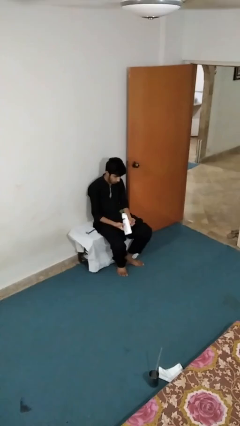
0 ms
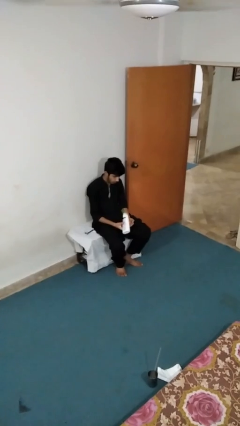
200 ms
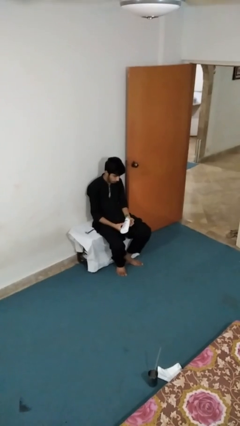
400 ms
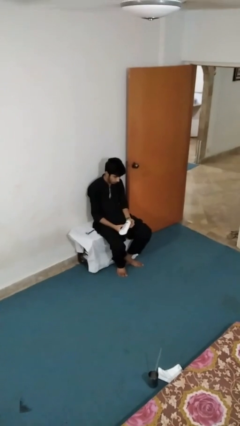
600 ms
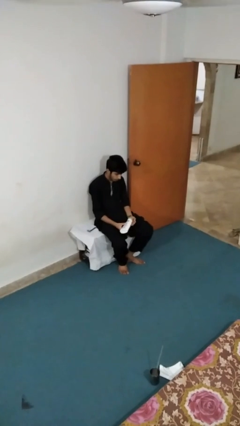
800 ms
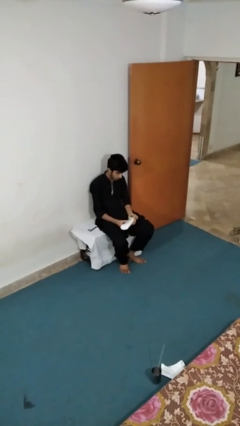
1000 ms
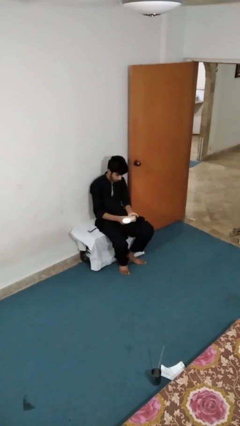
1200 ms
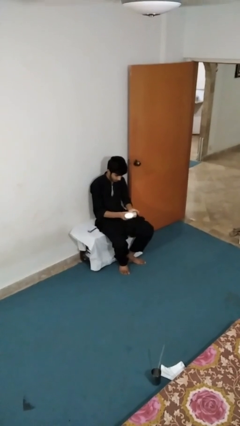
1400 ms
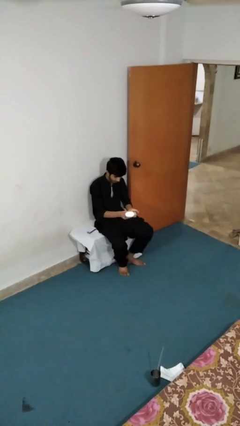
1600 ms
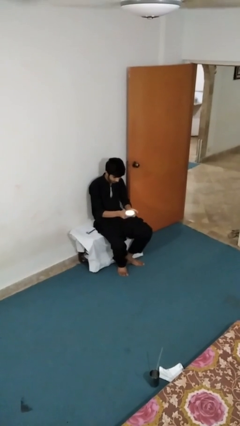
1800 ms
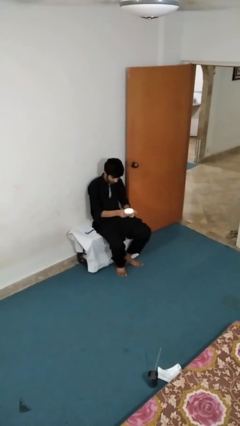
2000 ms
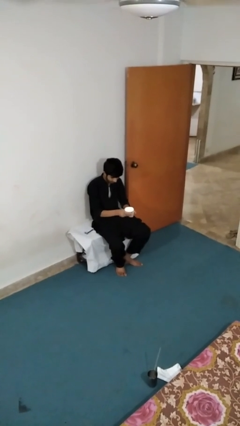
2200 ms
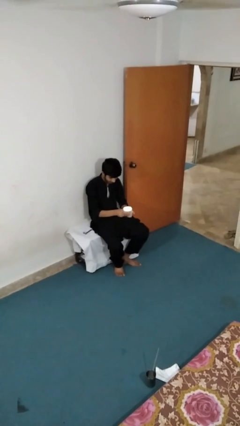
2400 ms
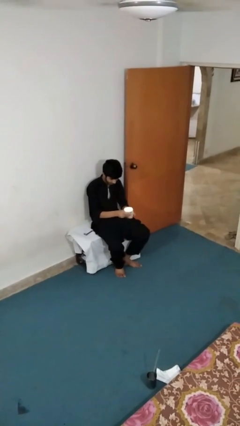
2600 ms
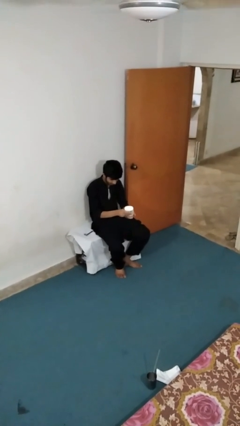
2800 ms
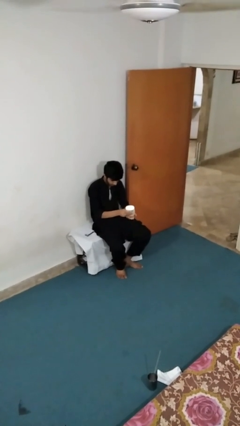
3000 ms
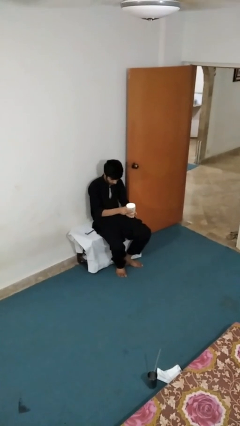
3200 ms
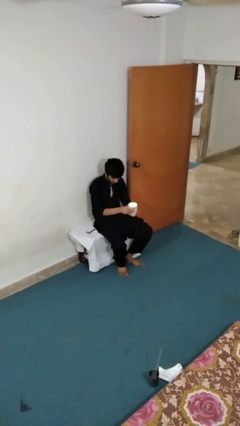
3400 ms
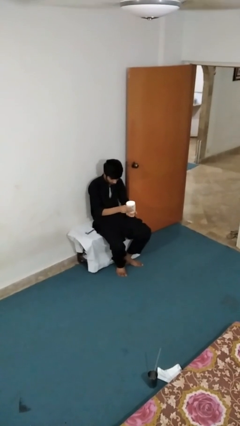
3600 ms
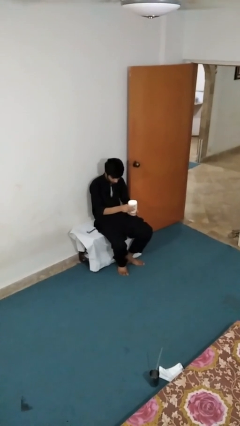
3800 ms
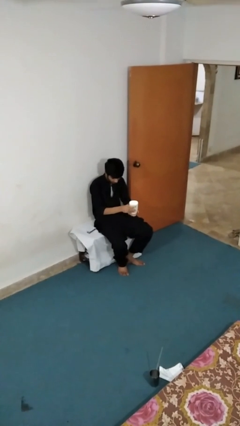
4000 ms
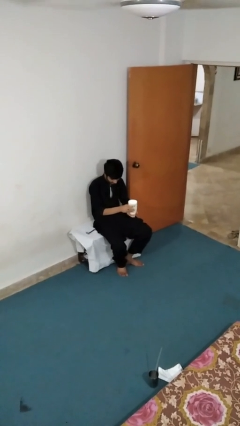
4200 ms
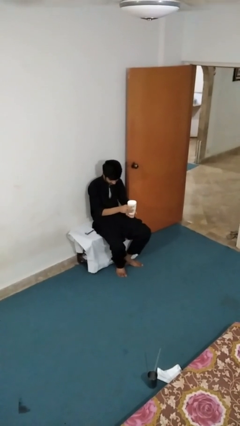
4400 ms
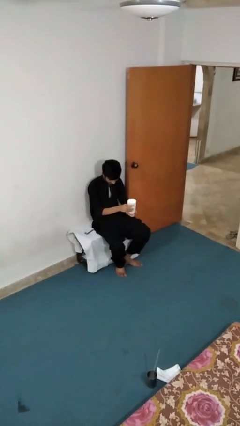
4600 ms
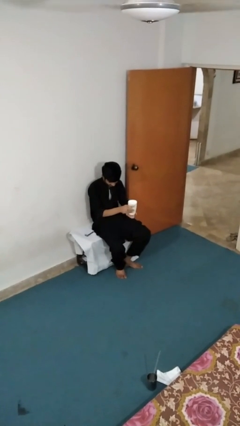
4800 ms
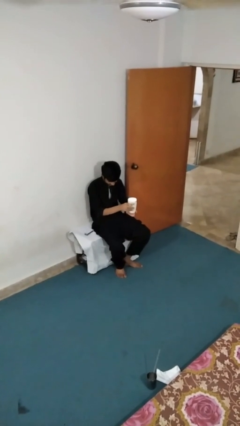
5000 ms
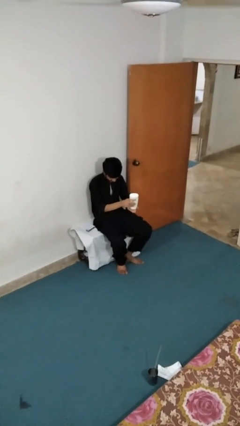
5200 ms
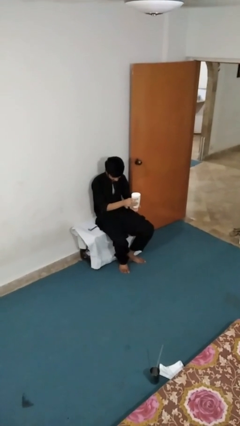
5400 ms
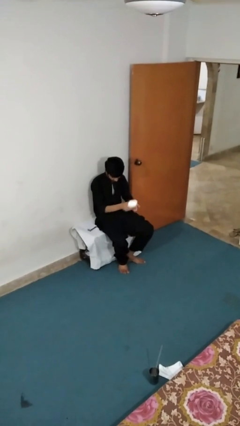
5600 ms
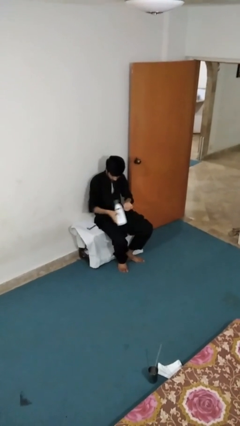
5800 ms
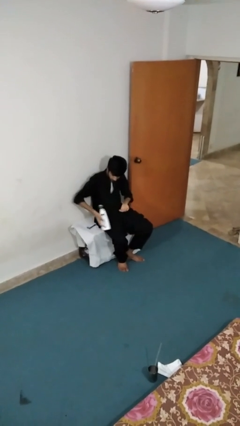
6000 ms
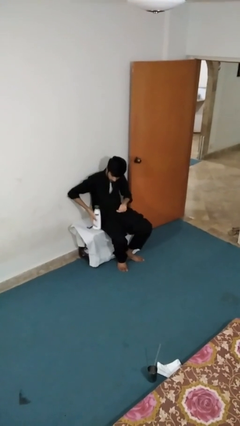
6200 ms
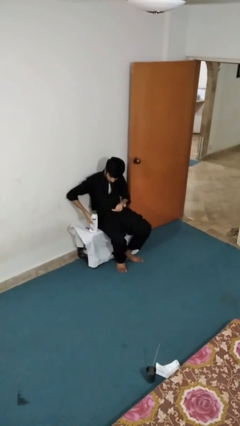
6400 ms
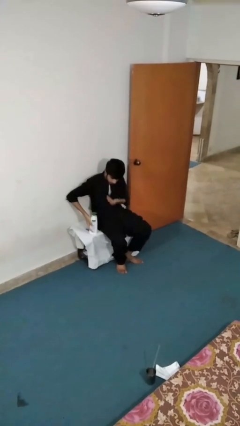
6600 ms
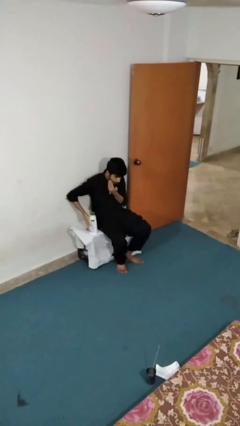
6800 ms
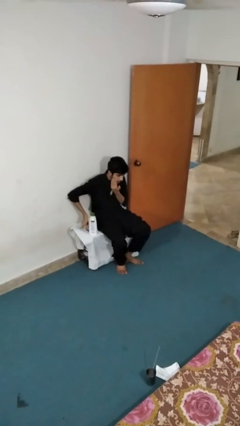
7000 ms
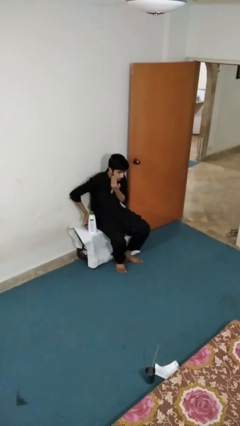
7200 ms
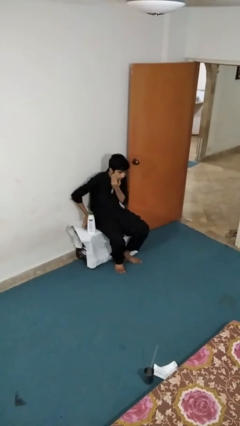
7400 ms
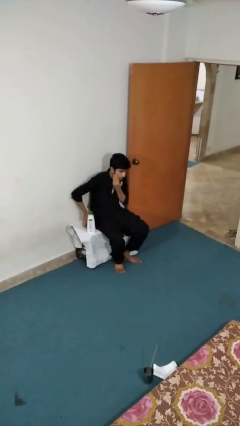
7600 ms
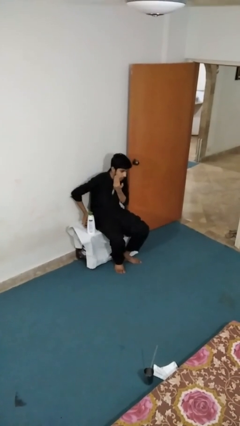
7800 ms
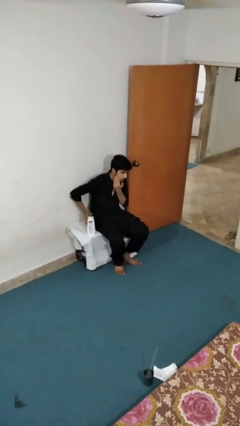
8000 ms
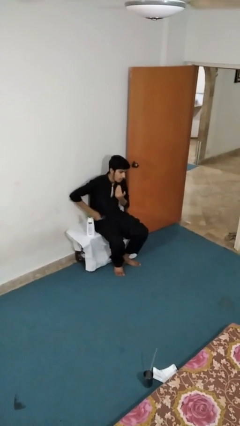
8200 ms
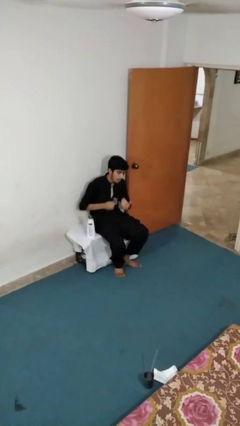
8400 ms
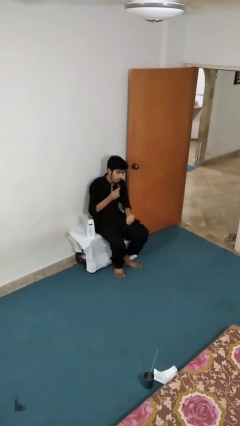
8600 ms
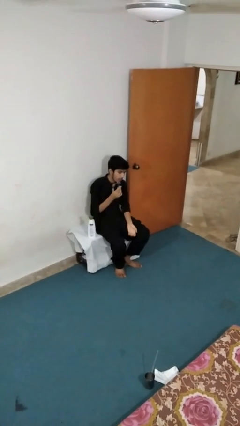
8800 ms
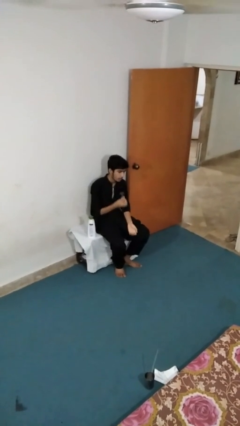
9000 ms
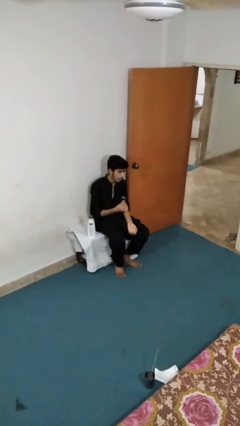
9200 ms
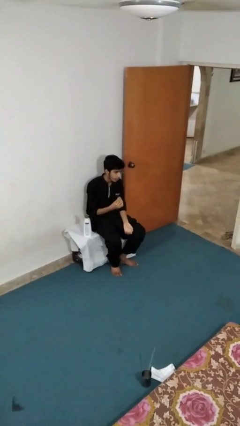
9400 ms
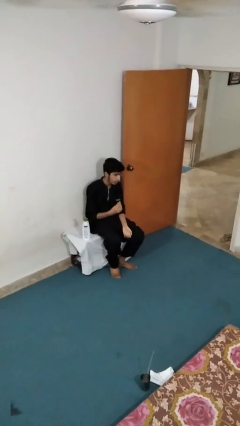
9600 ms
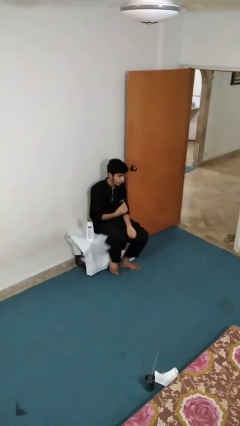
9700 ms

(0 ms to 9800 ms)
person applies shaving cream

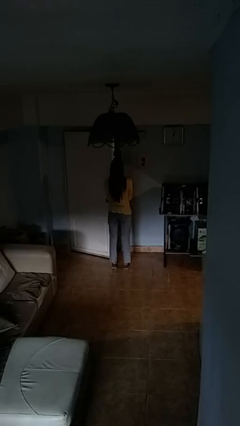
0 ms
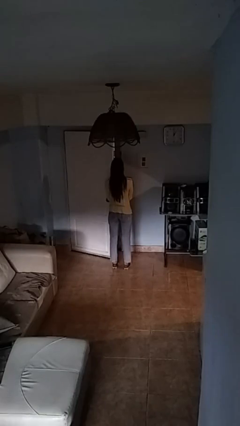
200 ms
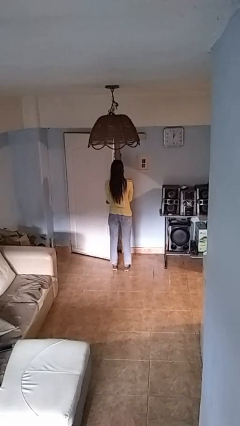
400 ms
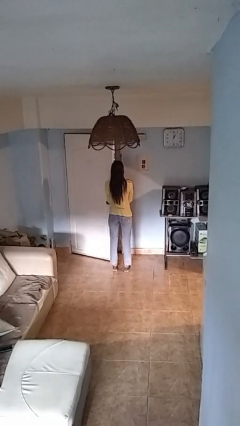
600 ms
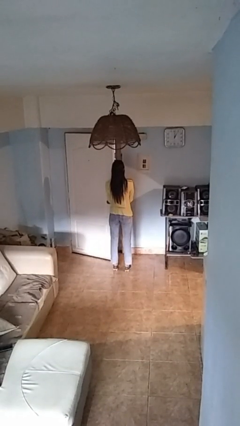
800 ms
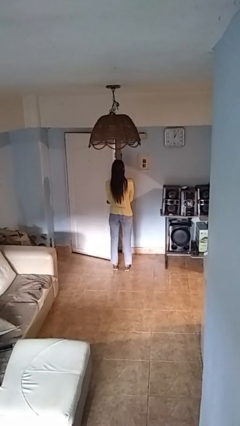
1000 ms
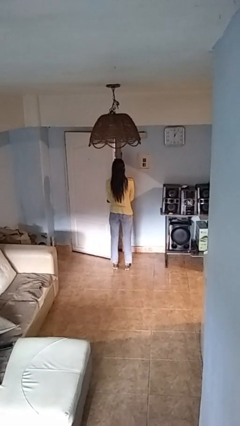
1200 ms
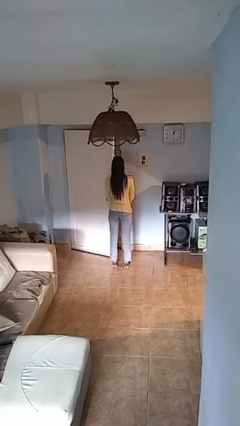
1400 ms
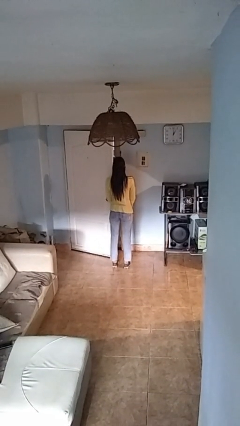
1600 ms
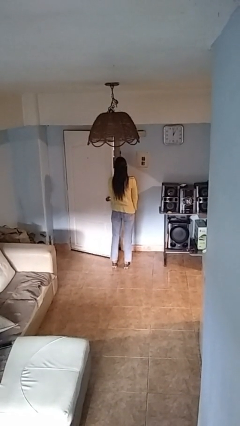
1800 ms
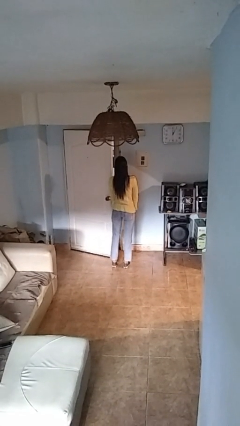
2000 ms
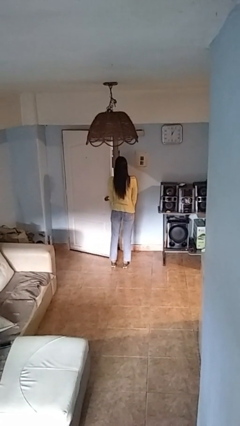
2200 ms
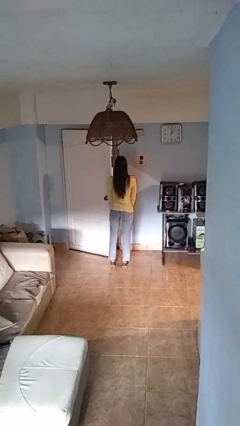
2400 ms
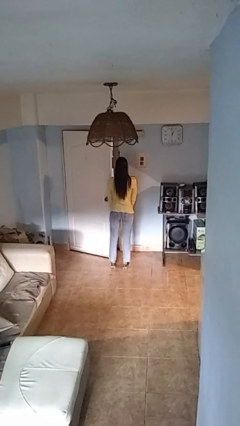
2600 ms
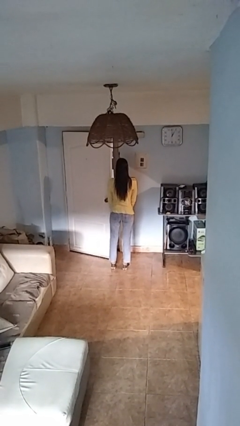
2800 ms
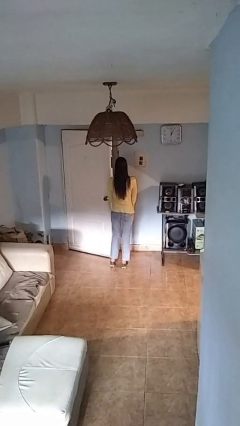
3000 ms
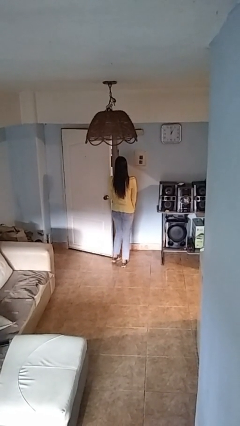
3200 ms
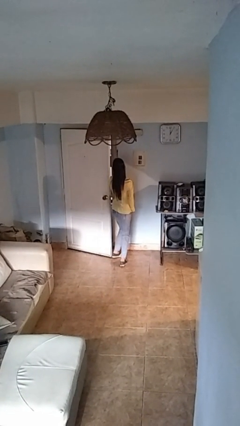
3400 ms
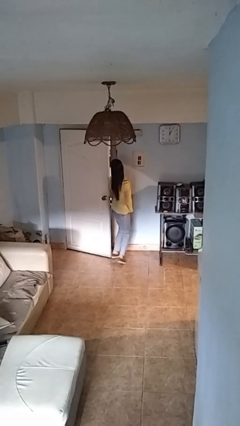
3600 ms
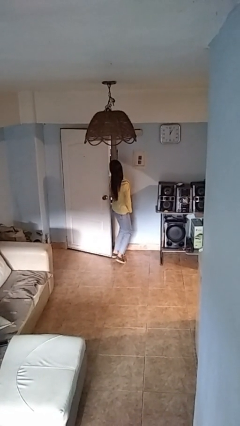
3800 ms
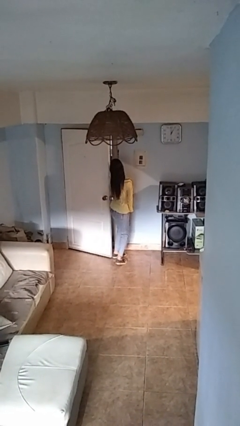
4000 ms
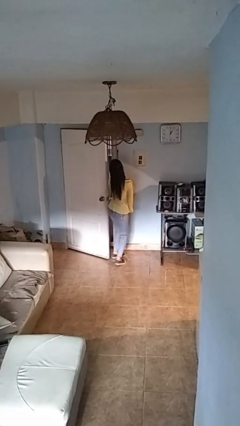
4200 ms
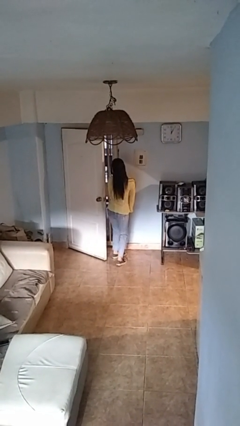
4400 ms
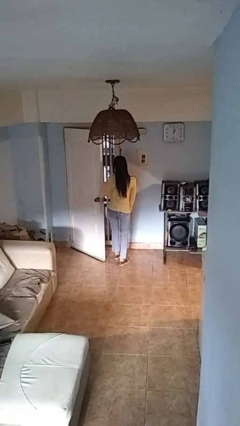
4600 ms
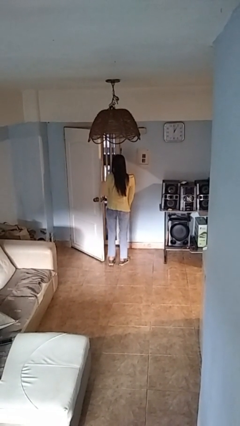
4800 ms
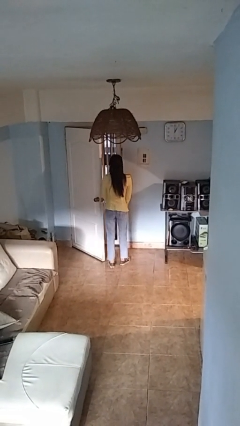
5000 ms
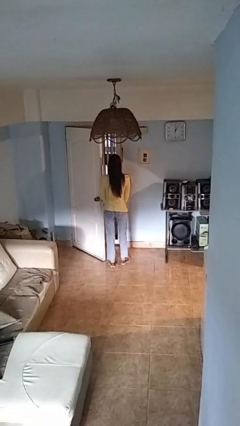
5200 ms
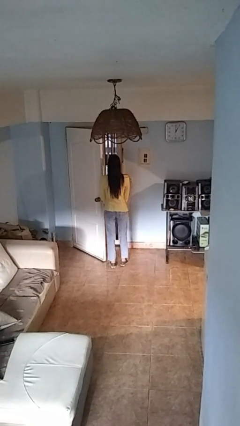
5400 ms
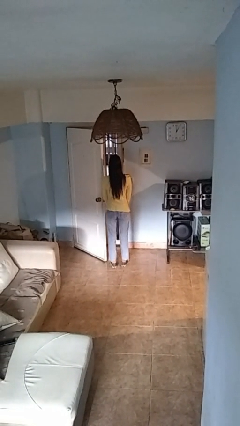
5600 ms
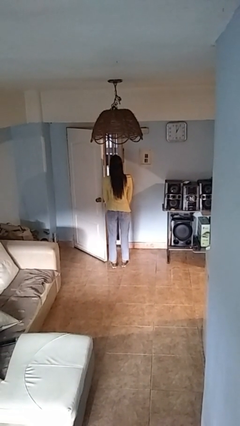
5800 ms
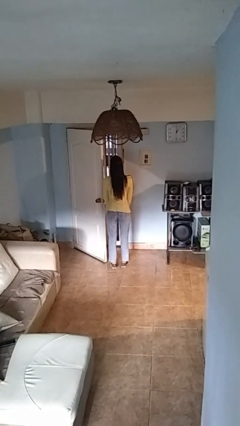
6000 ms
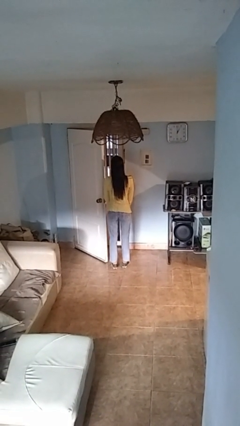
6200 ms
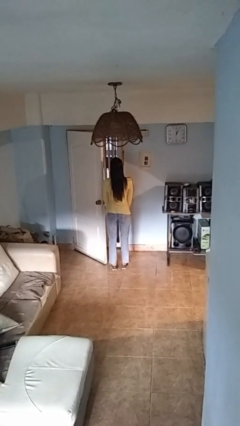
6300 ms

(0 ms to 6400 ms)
person opens facility door

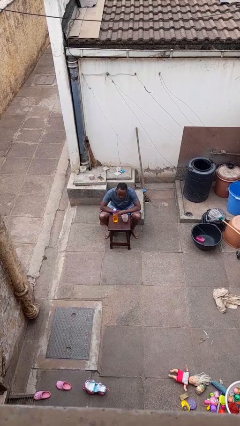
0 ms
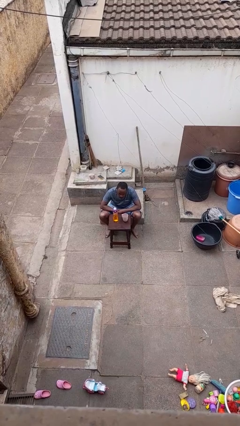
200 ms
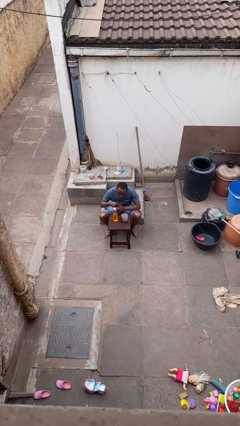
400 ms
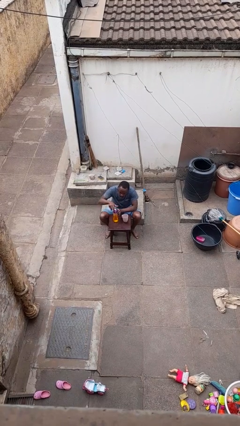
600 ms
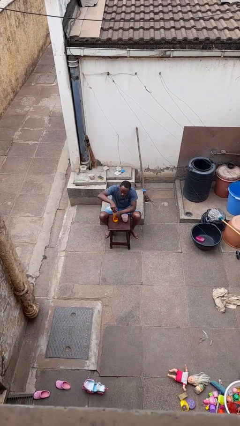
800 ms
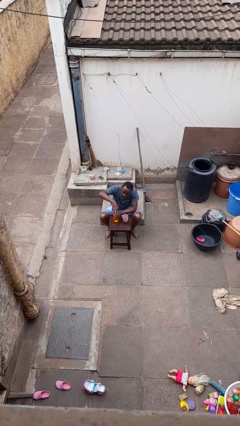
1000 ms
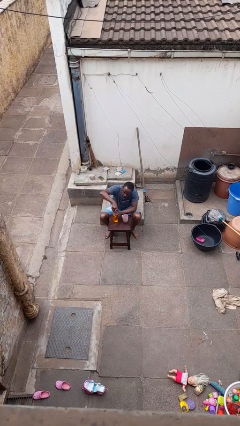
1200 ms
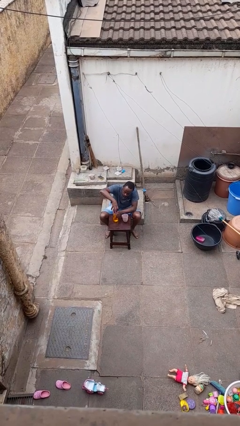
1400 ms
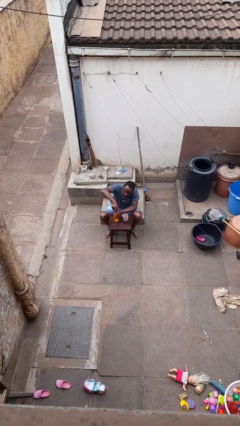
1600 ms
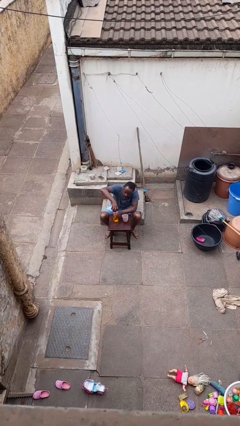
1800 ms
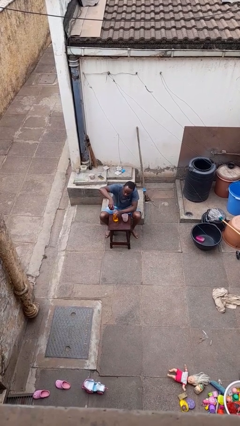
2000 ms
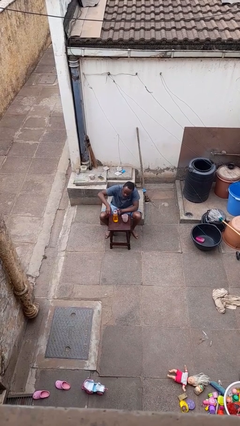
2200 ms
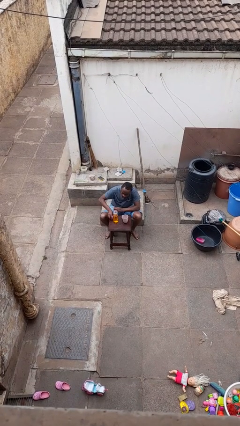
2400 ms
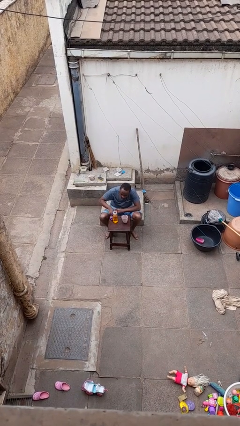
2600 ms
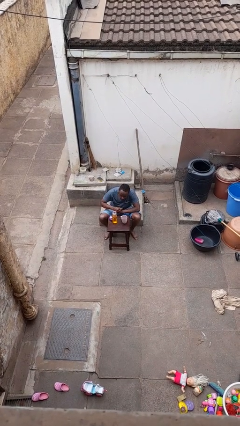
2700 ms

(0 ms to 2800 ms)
person unscrews lid from bottle
